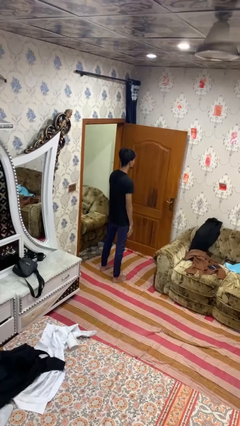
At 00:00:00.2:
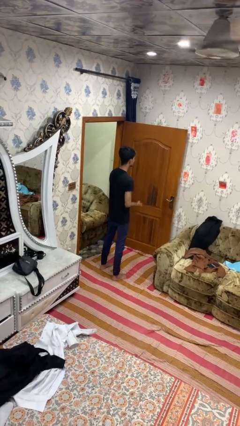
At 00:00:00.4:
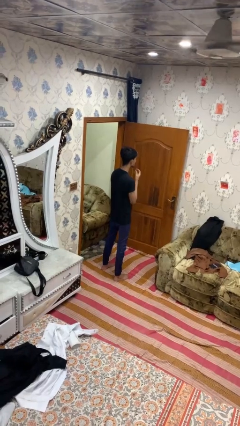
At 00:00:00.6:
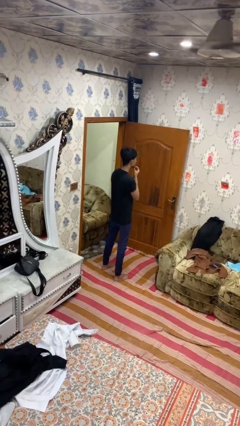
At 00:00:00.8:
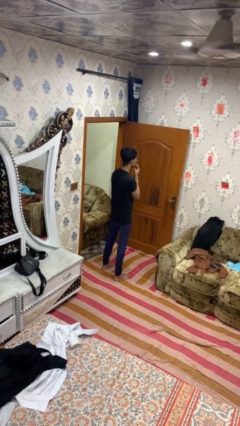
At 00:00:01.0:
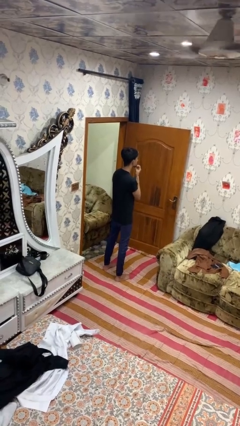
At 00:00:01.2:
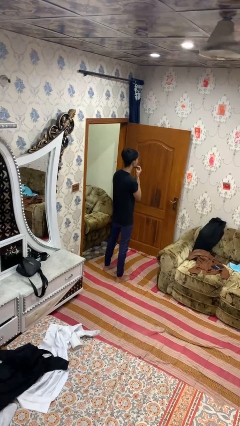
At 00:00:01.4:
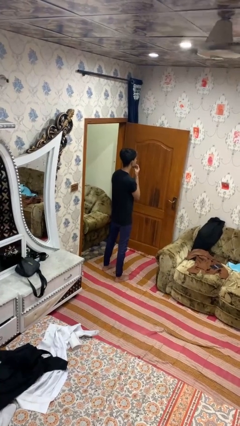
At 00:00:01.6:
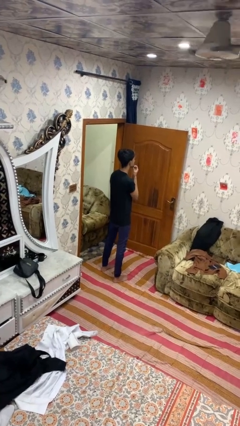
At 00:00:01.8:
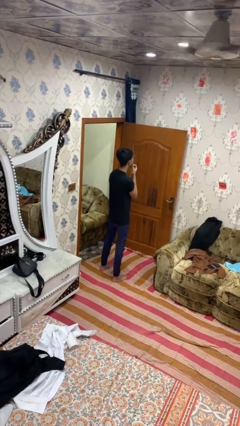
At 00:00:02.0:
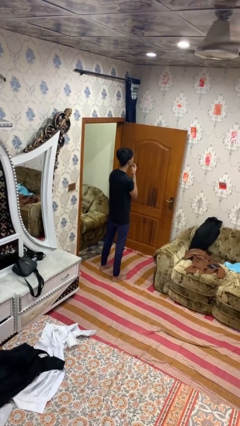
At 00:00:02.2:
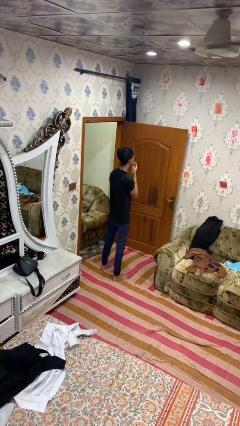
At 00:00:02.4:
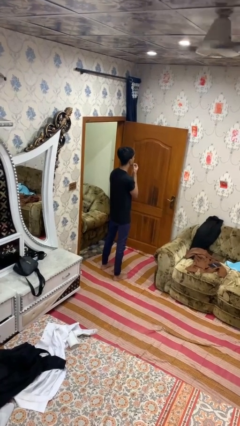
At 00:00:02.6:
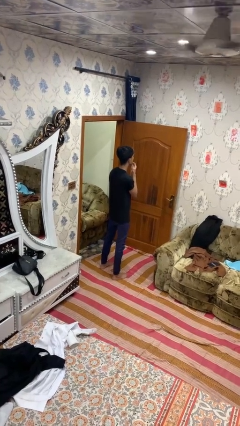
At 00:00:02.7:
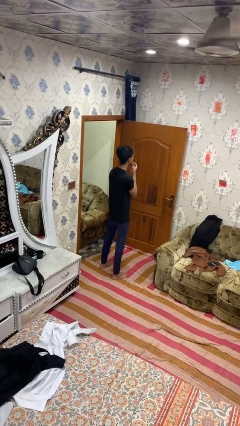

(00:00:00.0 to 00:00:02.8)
person strokes chin

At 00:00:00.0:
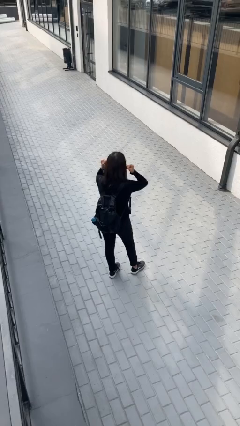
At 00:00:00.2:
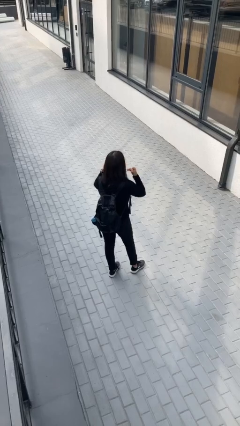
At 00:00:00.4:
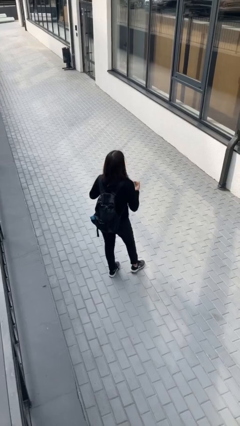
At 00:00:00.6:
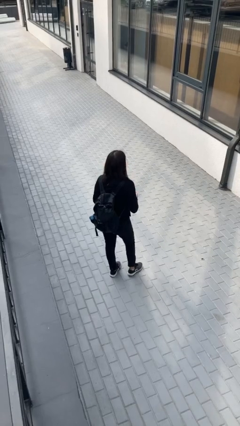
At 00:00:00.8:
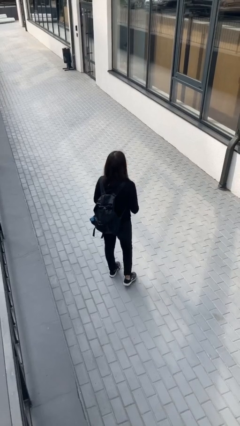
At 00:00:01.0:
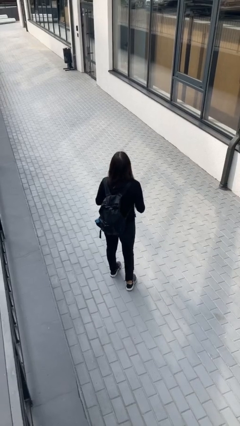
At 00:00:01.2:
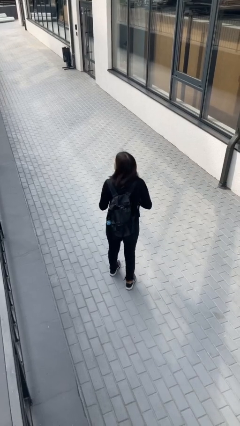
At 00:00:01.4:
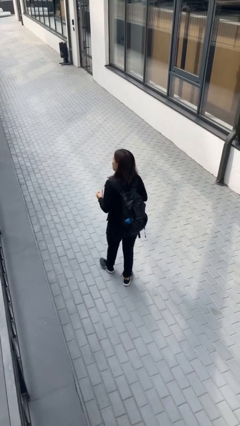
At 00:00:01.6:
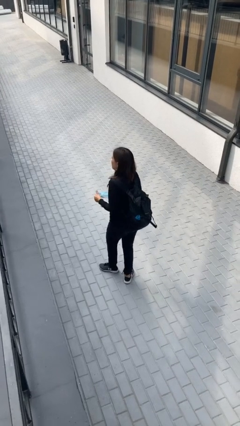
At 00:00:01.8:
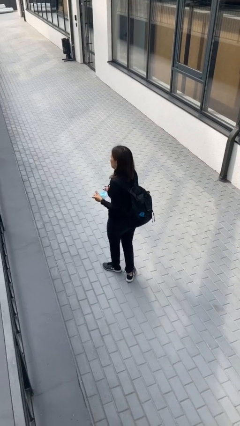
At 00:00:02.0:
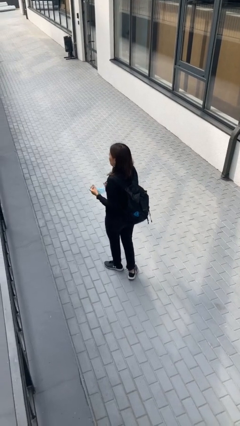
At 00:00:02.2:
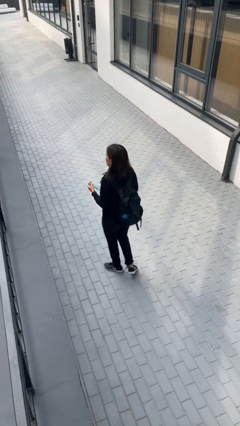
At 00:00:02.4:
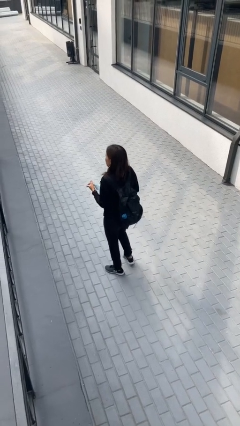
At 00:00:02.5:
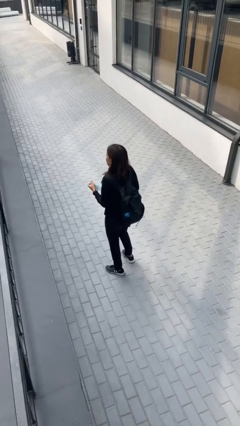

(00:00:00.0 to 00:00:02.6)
person takes off facemask

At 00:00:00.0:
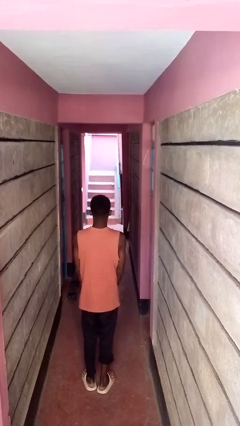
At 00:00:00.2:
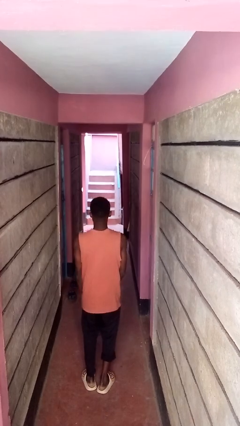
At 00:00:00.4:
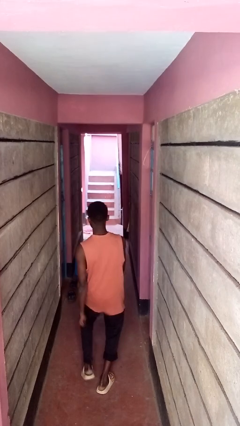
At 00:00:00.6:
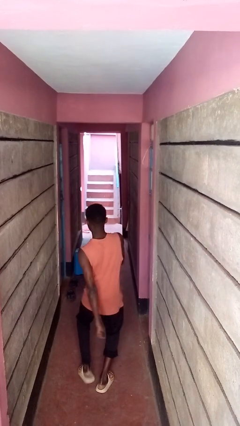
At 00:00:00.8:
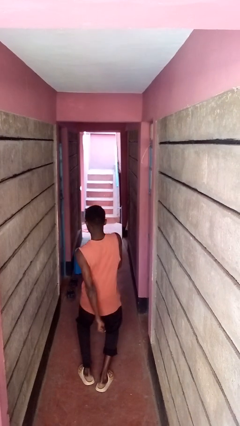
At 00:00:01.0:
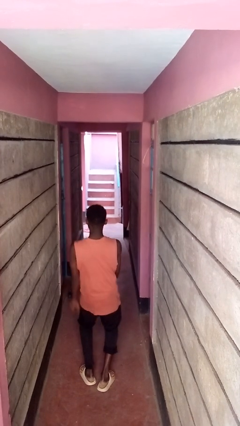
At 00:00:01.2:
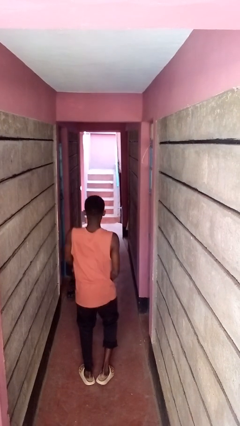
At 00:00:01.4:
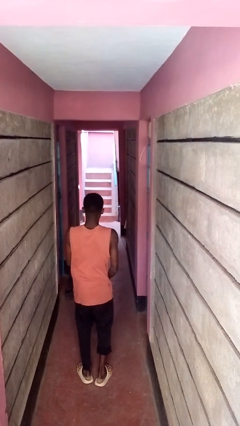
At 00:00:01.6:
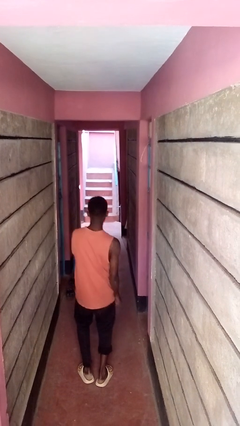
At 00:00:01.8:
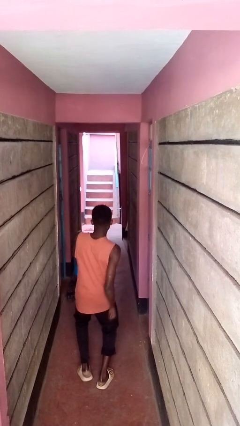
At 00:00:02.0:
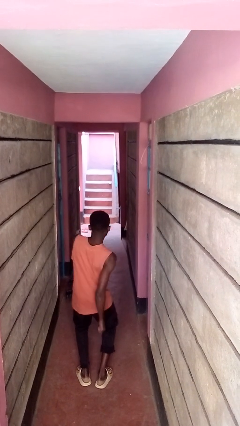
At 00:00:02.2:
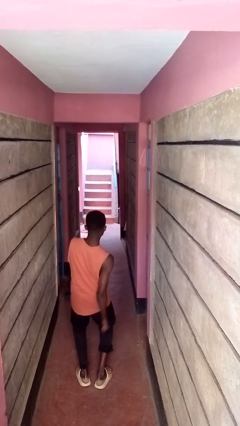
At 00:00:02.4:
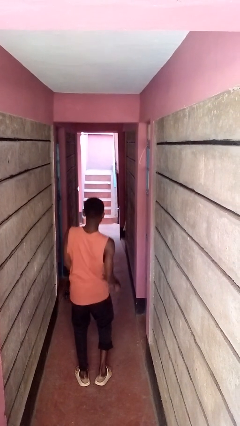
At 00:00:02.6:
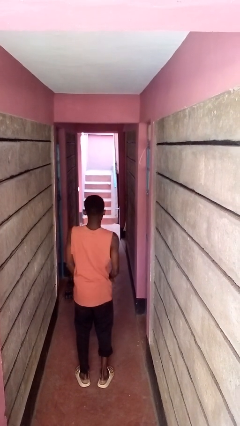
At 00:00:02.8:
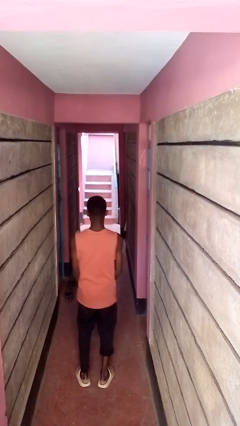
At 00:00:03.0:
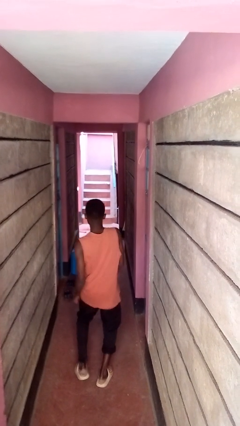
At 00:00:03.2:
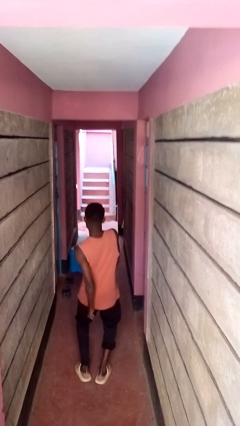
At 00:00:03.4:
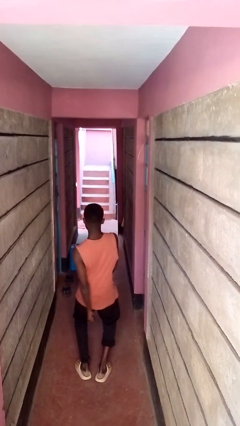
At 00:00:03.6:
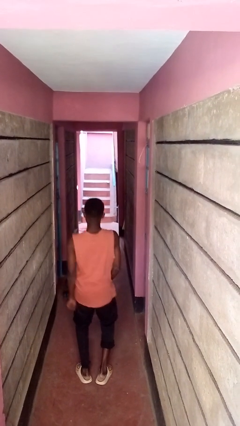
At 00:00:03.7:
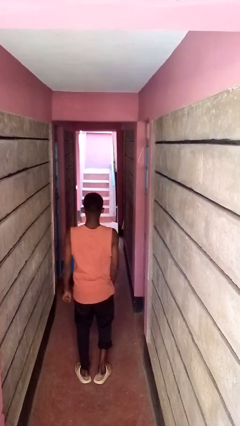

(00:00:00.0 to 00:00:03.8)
person dances in place

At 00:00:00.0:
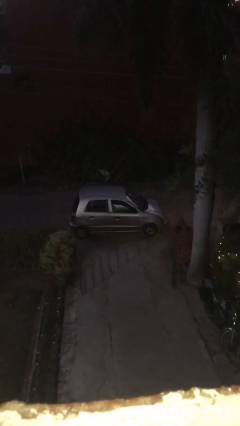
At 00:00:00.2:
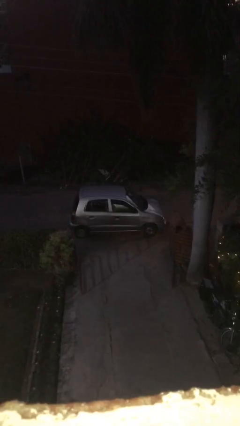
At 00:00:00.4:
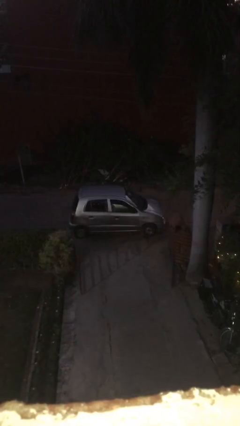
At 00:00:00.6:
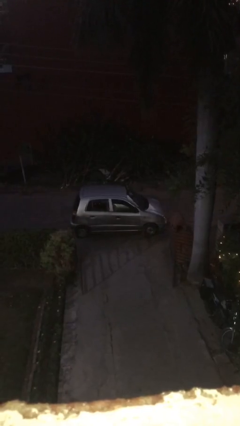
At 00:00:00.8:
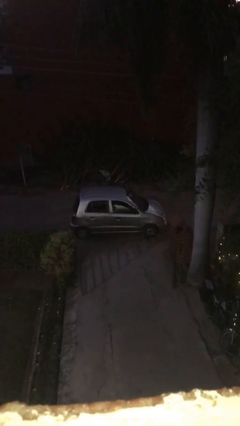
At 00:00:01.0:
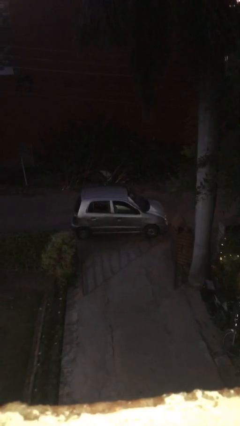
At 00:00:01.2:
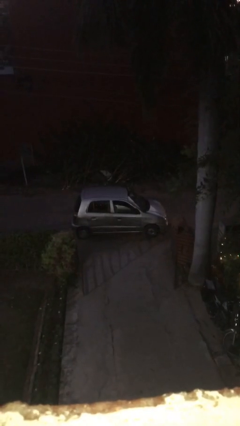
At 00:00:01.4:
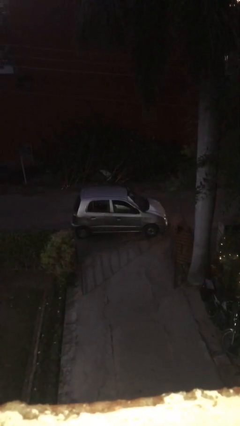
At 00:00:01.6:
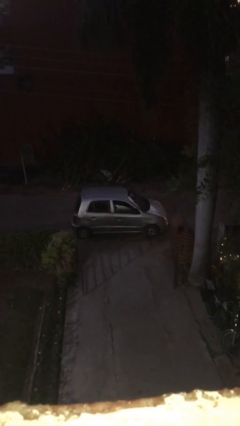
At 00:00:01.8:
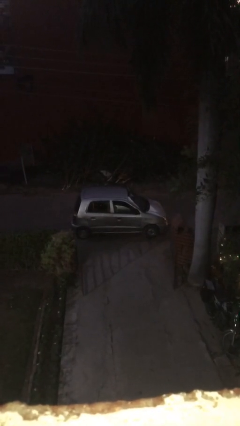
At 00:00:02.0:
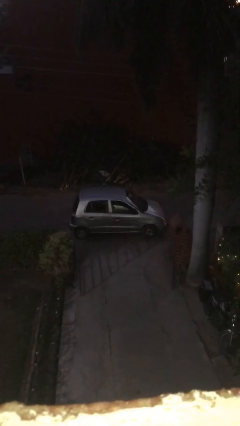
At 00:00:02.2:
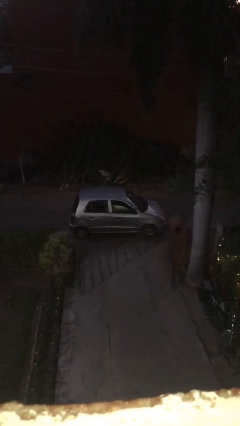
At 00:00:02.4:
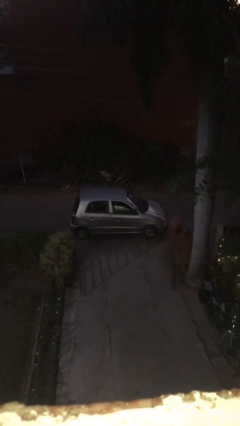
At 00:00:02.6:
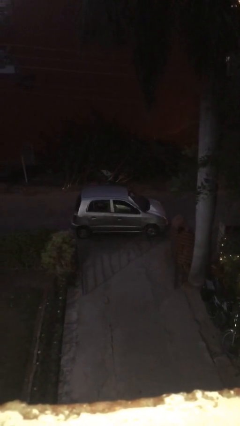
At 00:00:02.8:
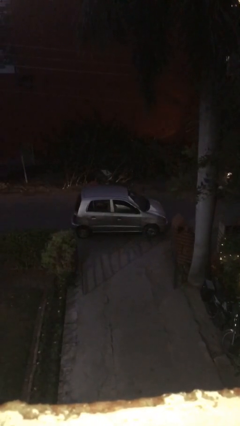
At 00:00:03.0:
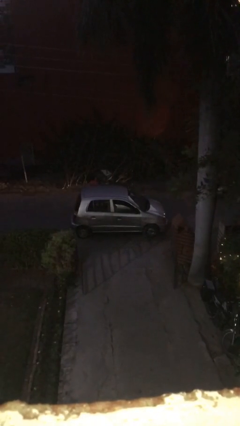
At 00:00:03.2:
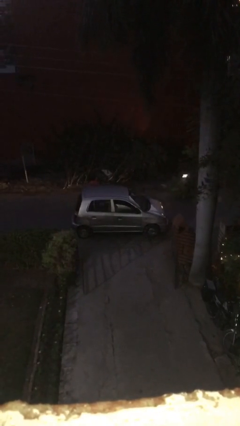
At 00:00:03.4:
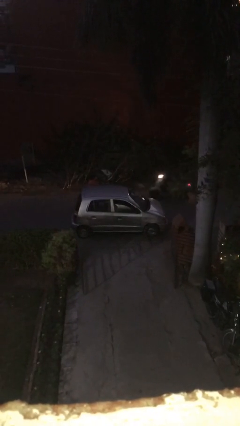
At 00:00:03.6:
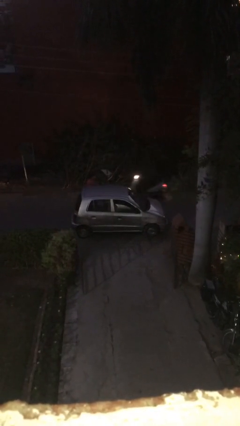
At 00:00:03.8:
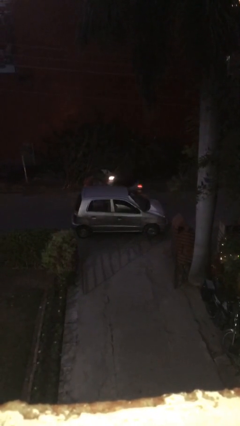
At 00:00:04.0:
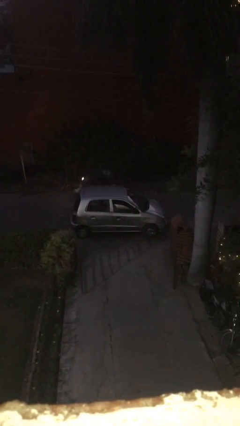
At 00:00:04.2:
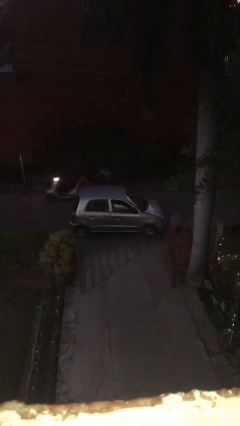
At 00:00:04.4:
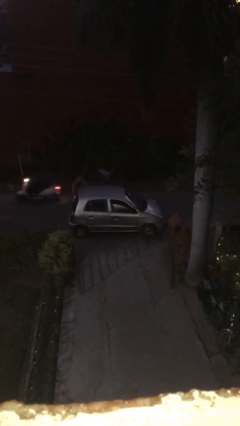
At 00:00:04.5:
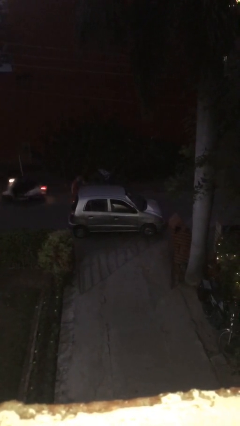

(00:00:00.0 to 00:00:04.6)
car drops off person

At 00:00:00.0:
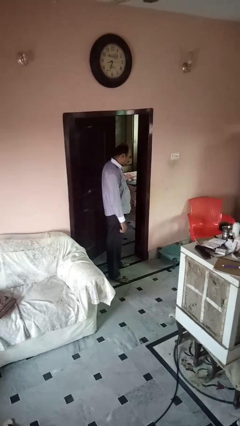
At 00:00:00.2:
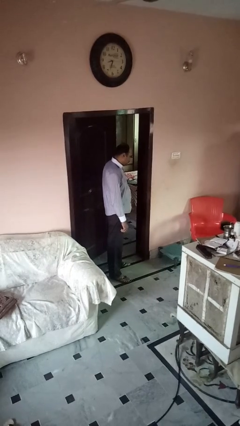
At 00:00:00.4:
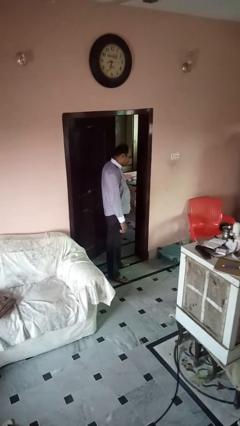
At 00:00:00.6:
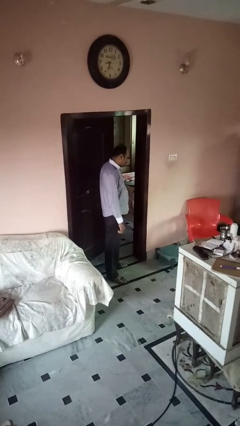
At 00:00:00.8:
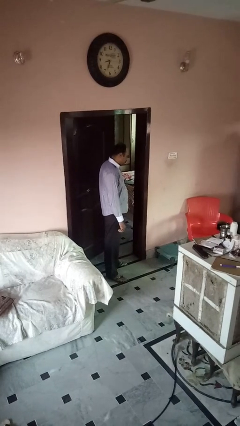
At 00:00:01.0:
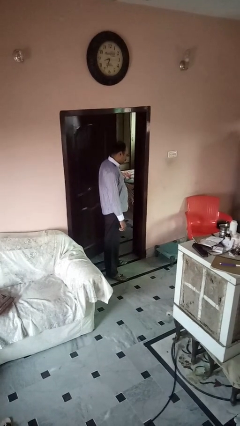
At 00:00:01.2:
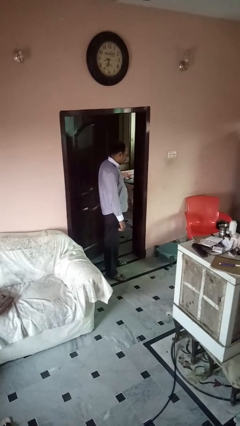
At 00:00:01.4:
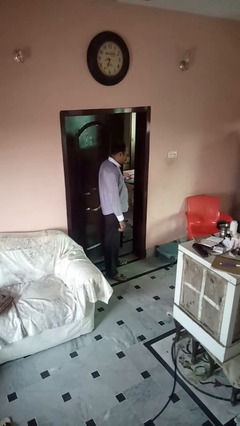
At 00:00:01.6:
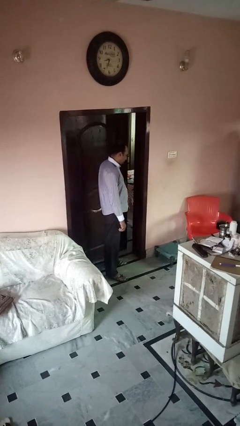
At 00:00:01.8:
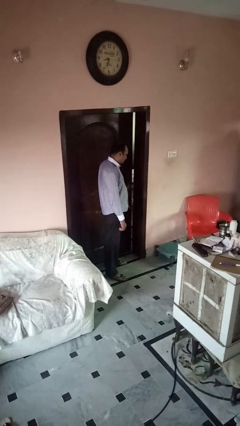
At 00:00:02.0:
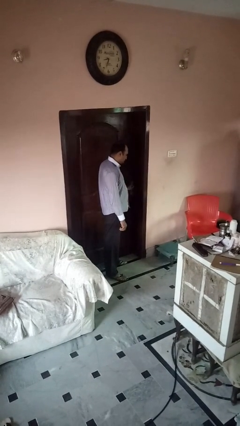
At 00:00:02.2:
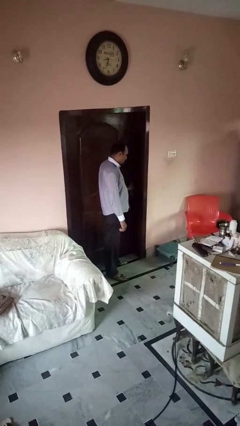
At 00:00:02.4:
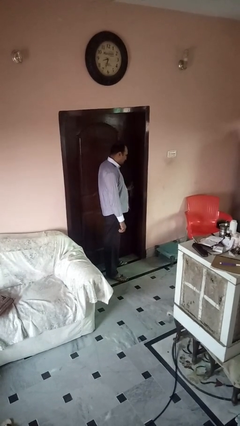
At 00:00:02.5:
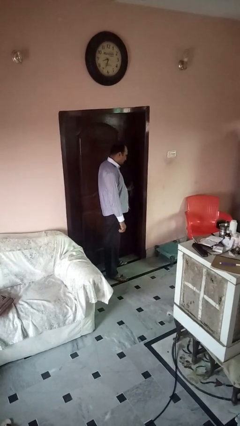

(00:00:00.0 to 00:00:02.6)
person closes gate

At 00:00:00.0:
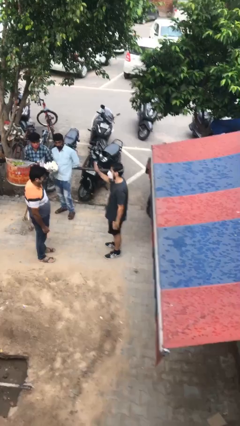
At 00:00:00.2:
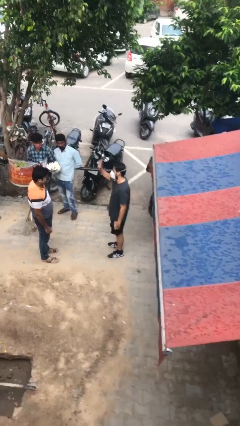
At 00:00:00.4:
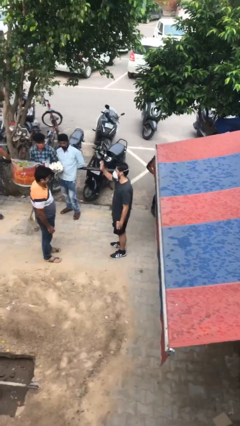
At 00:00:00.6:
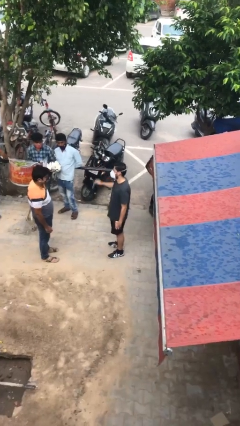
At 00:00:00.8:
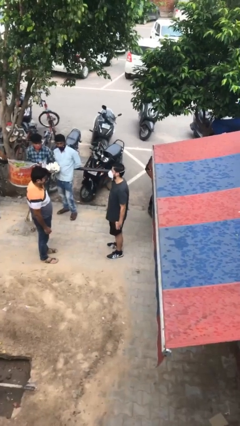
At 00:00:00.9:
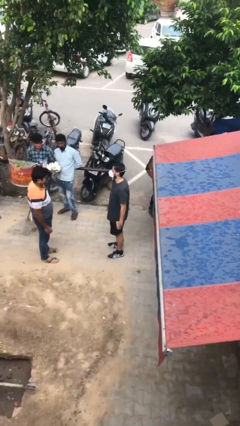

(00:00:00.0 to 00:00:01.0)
person waves at person
